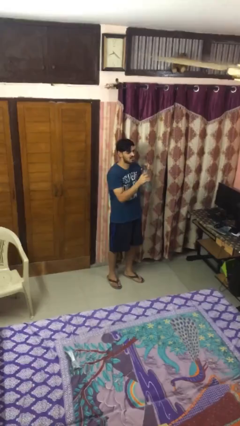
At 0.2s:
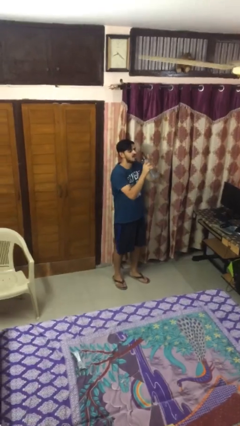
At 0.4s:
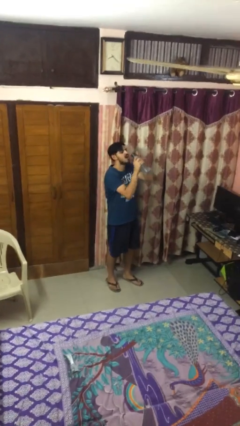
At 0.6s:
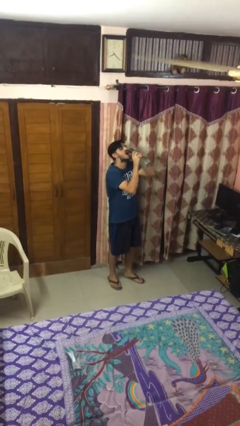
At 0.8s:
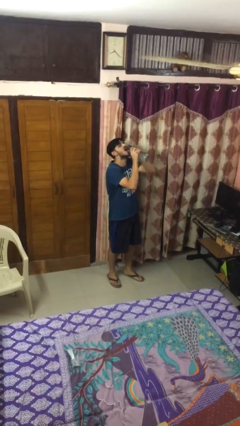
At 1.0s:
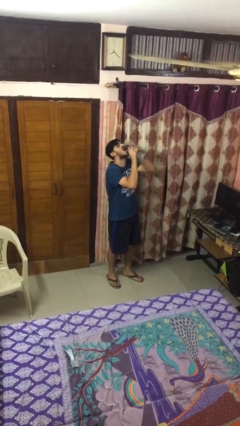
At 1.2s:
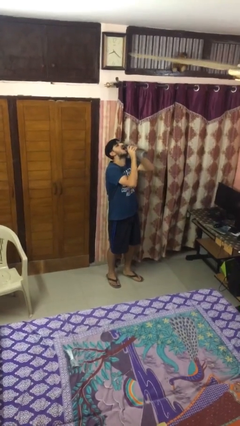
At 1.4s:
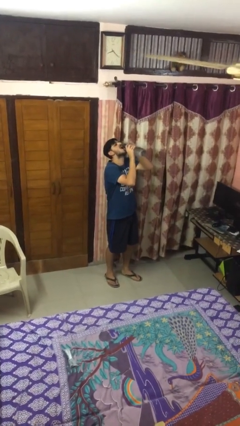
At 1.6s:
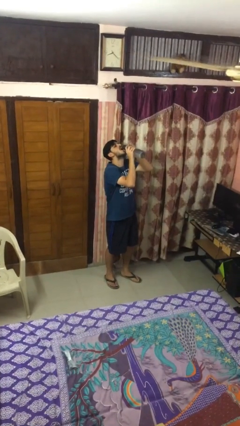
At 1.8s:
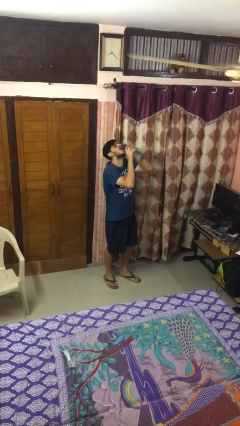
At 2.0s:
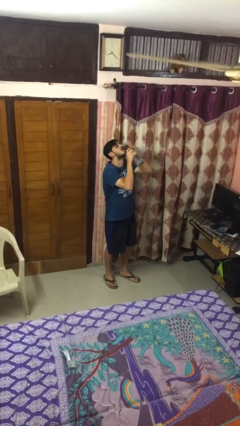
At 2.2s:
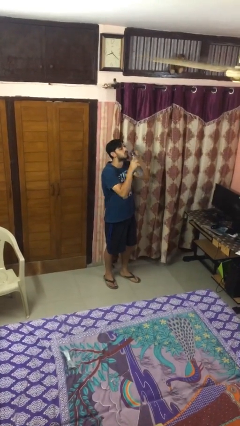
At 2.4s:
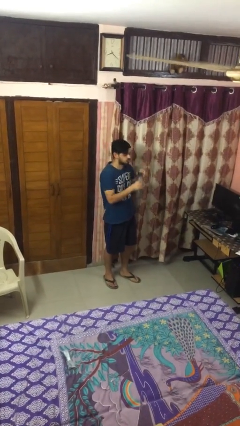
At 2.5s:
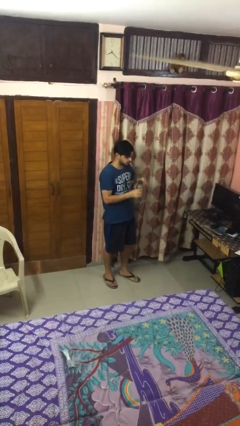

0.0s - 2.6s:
person drinks from bottle

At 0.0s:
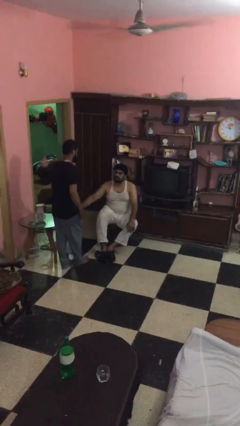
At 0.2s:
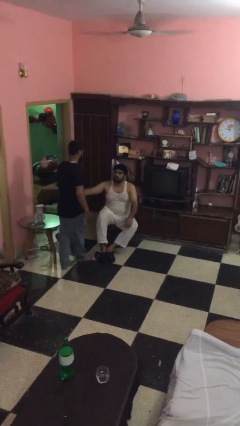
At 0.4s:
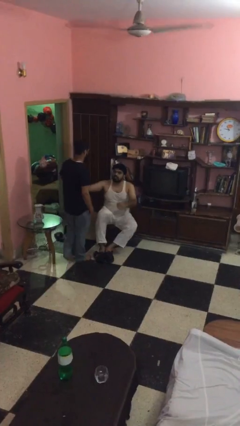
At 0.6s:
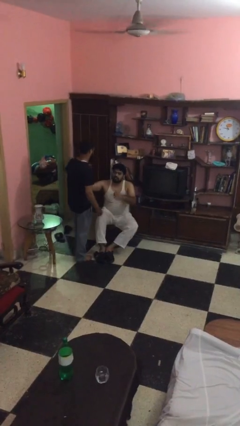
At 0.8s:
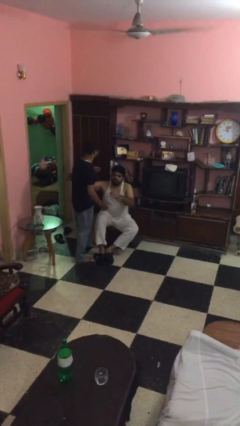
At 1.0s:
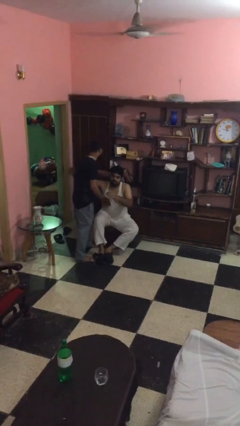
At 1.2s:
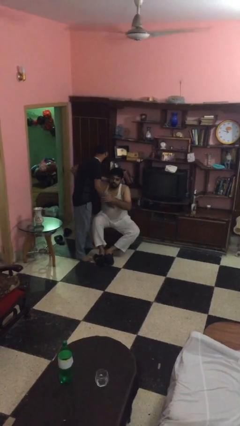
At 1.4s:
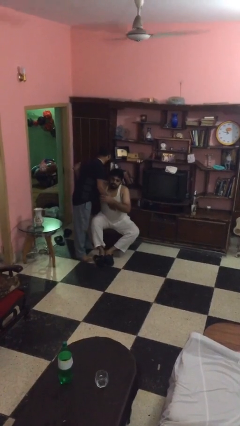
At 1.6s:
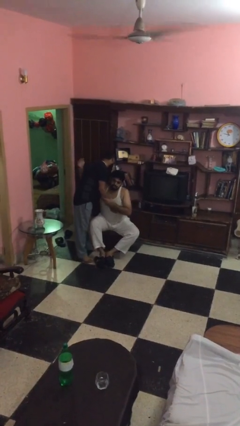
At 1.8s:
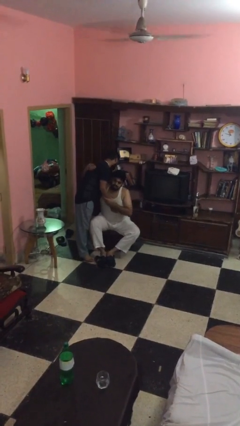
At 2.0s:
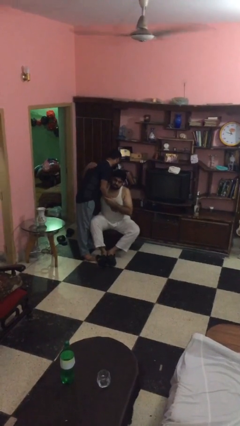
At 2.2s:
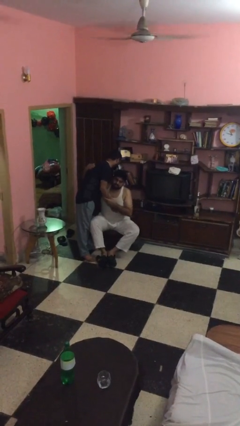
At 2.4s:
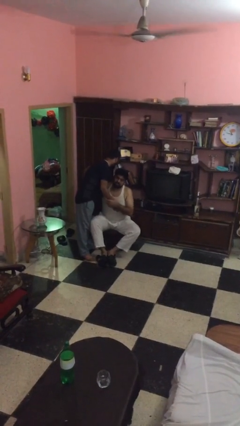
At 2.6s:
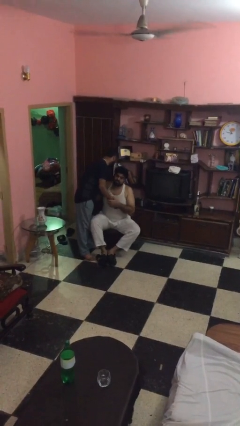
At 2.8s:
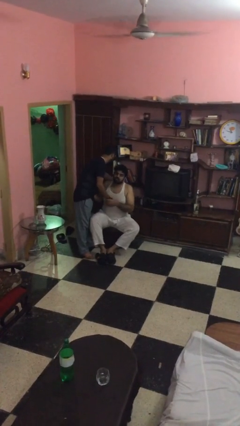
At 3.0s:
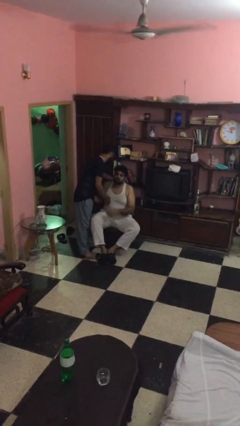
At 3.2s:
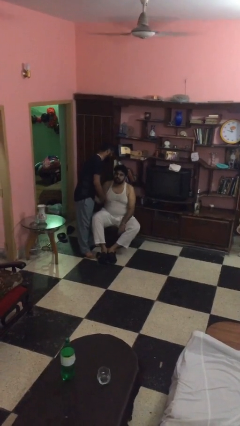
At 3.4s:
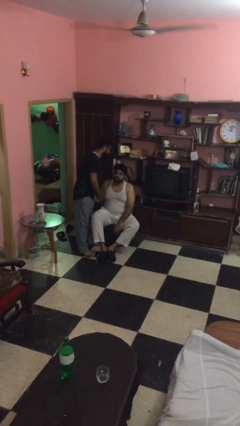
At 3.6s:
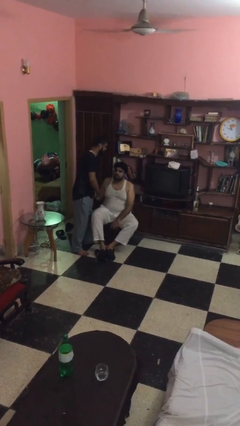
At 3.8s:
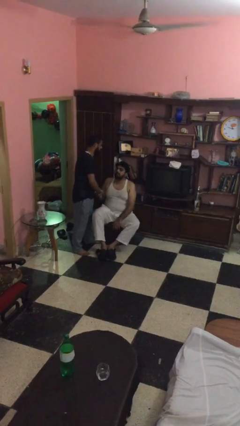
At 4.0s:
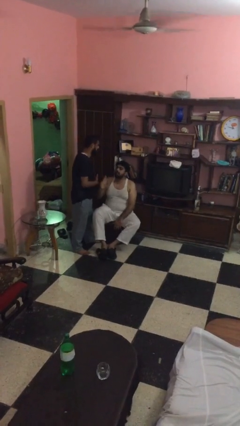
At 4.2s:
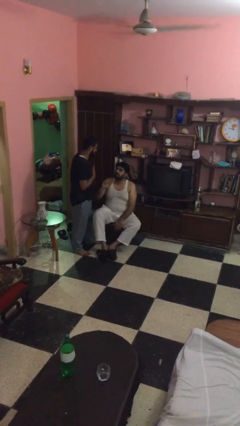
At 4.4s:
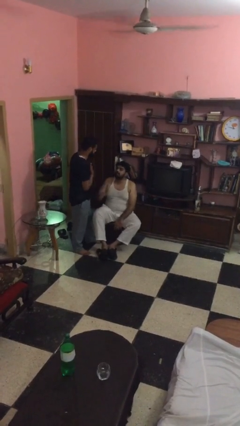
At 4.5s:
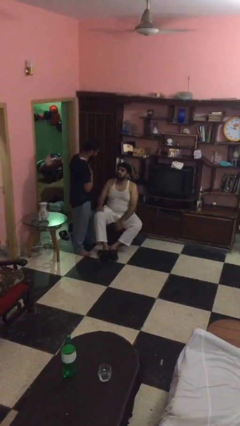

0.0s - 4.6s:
person embraces person

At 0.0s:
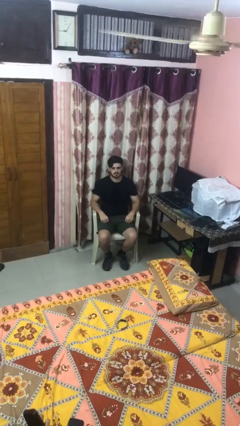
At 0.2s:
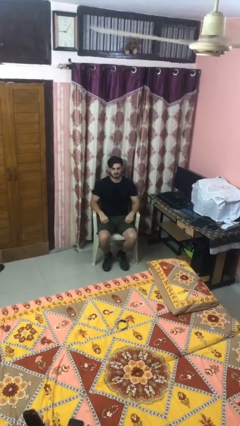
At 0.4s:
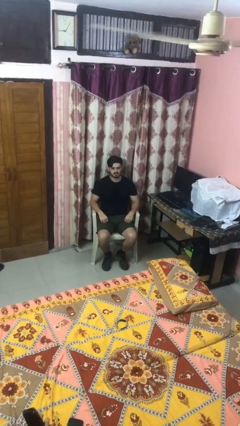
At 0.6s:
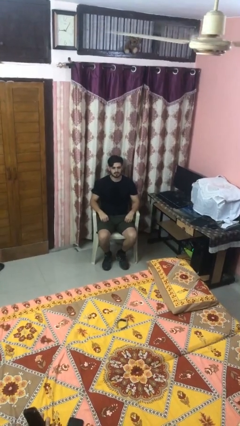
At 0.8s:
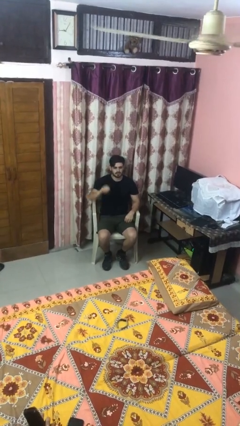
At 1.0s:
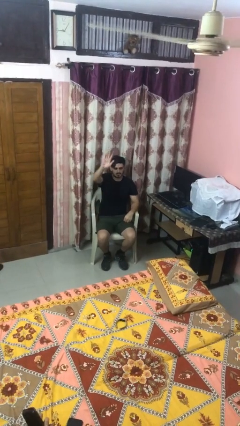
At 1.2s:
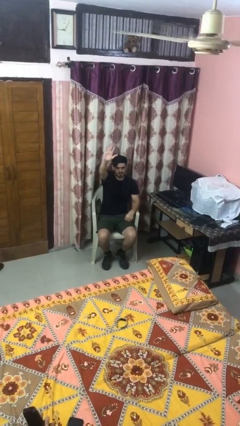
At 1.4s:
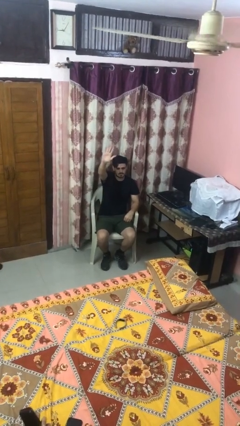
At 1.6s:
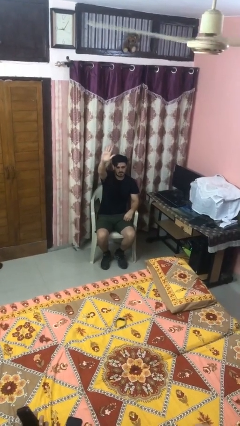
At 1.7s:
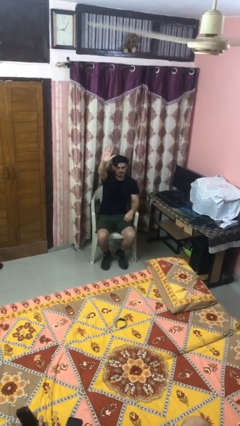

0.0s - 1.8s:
person gestures raise hand

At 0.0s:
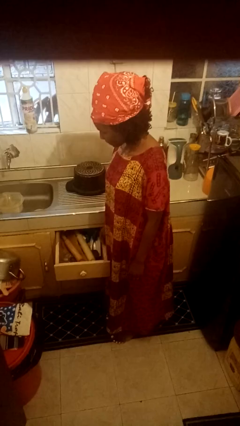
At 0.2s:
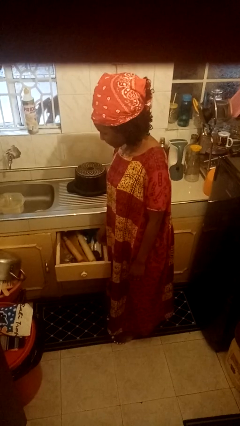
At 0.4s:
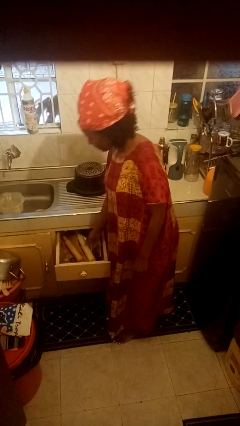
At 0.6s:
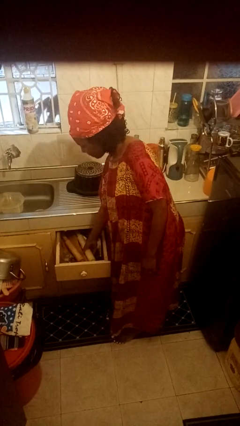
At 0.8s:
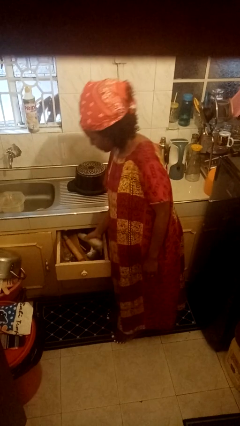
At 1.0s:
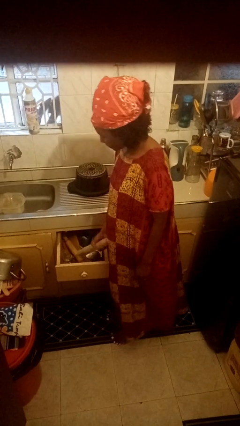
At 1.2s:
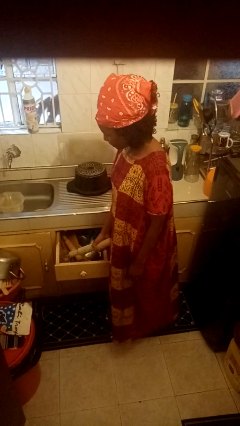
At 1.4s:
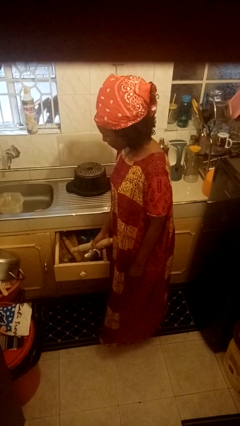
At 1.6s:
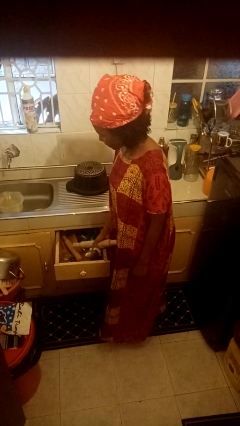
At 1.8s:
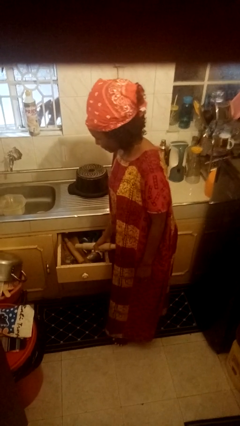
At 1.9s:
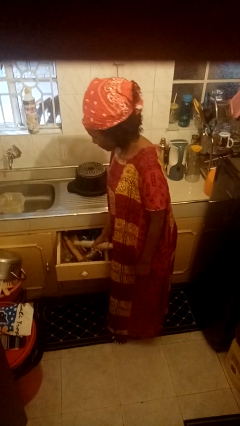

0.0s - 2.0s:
person takes object from kitchen drawer

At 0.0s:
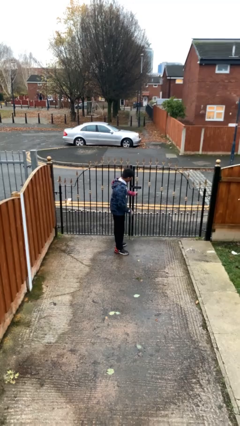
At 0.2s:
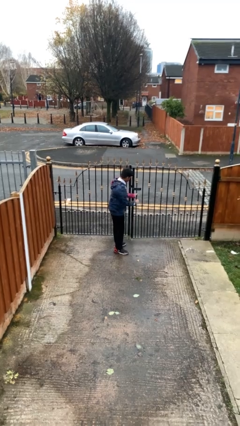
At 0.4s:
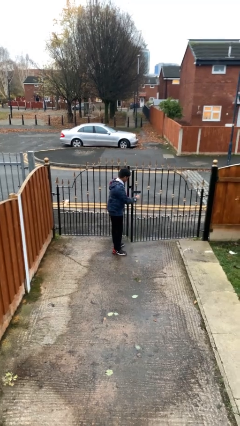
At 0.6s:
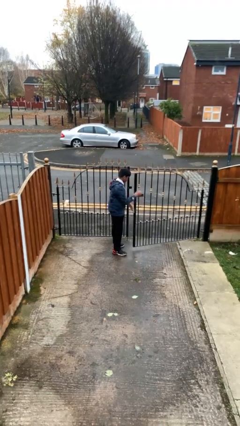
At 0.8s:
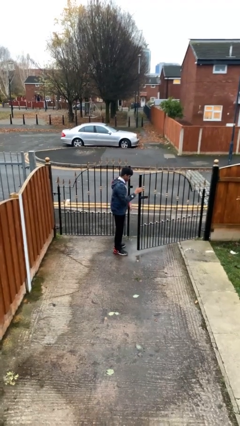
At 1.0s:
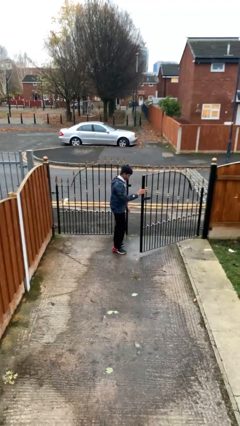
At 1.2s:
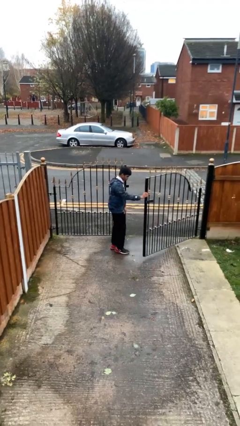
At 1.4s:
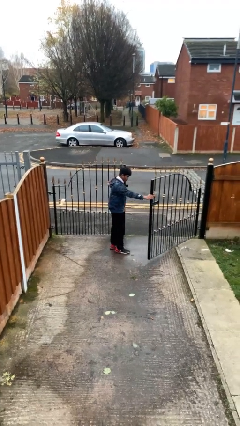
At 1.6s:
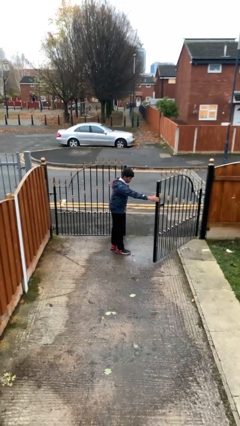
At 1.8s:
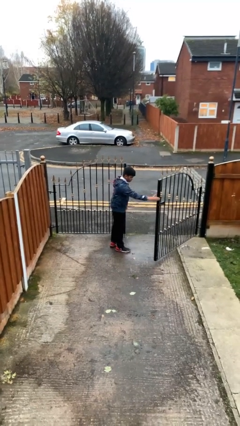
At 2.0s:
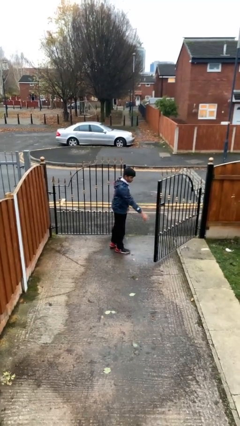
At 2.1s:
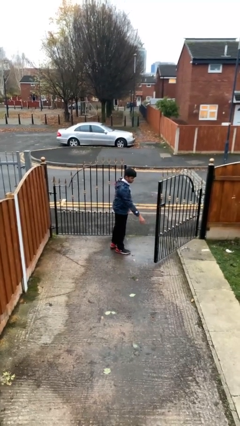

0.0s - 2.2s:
person opens facility door

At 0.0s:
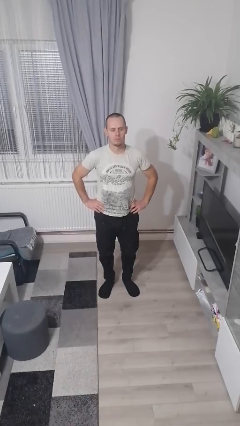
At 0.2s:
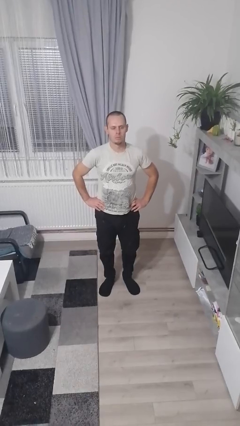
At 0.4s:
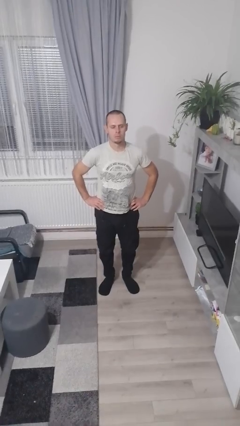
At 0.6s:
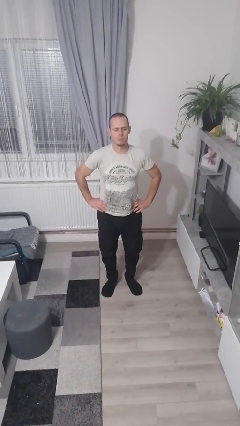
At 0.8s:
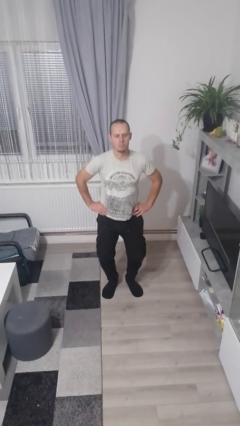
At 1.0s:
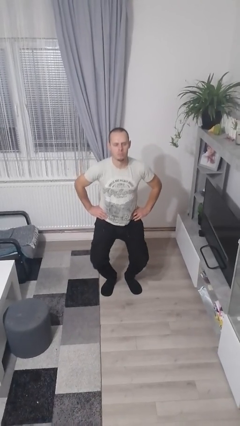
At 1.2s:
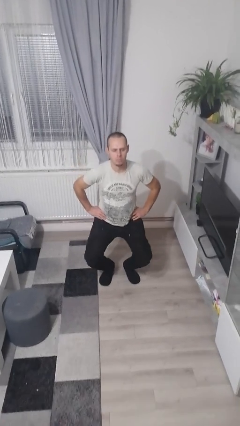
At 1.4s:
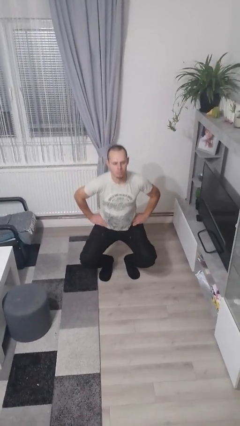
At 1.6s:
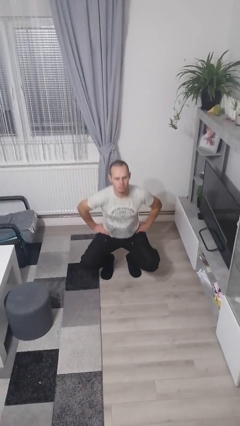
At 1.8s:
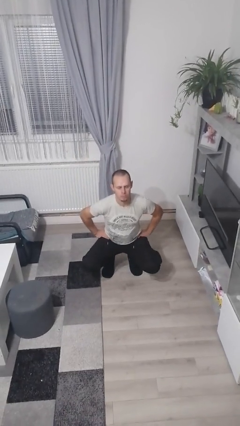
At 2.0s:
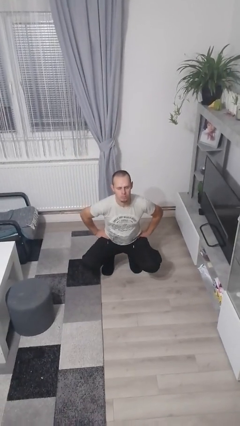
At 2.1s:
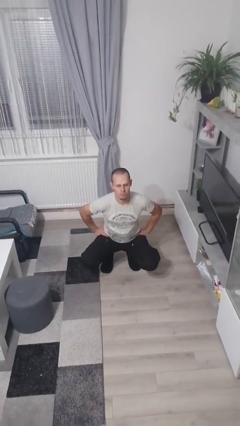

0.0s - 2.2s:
person squats

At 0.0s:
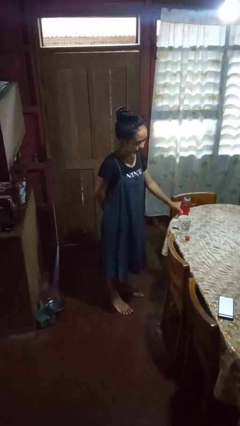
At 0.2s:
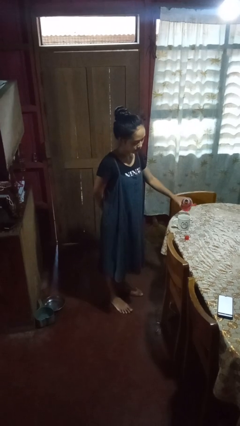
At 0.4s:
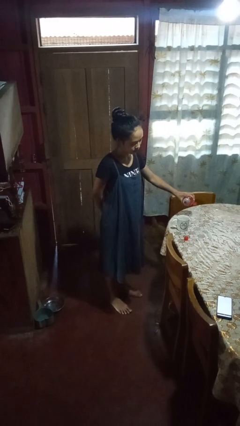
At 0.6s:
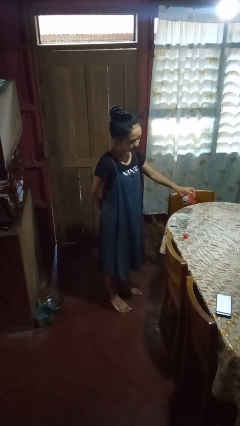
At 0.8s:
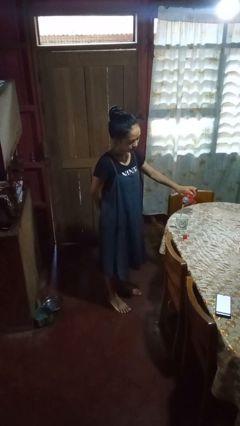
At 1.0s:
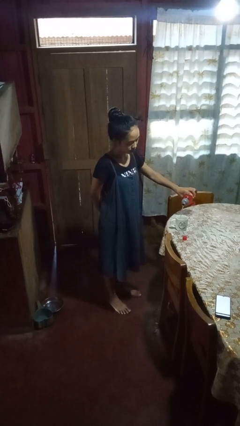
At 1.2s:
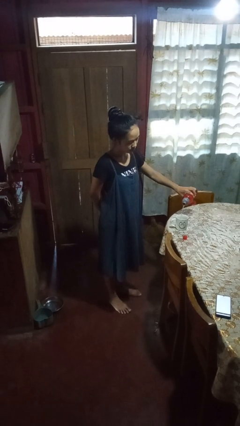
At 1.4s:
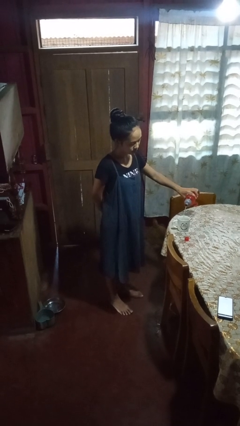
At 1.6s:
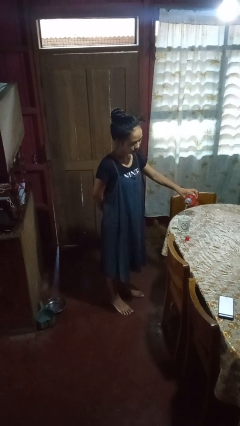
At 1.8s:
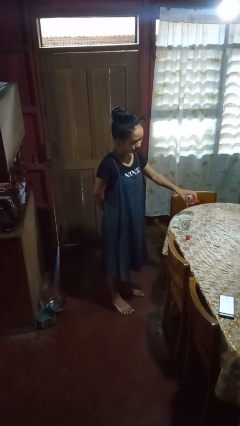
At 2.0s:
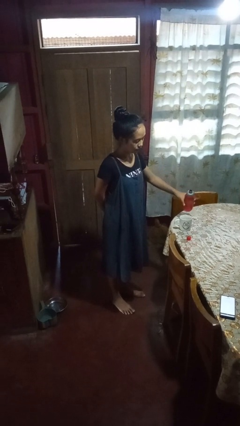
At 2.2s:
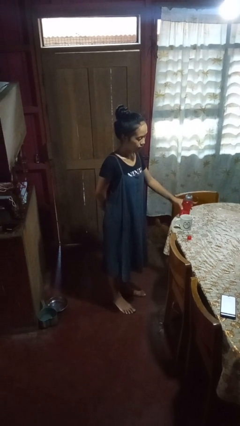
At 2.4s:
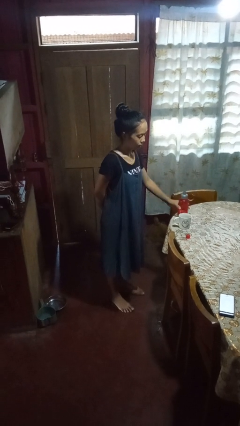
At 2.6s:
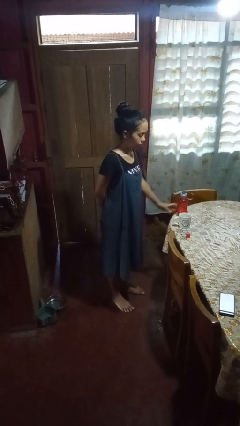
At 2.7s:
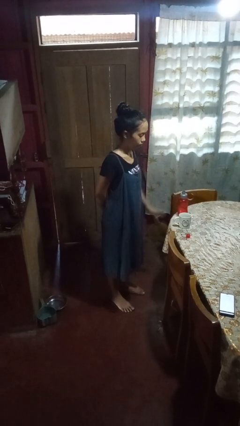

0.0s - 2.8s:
person pours liquid into cup
